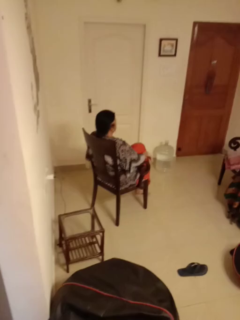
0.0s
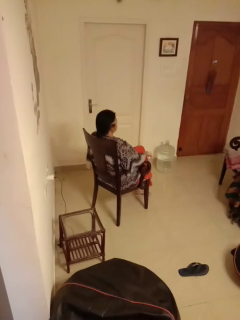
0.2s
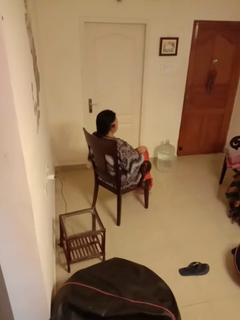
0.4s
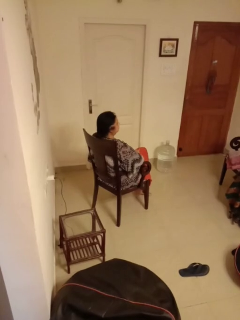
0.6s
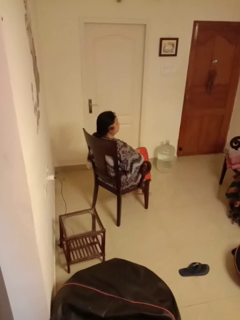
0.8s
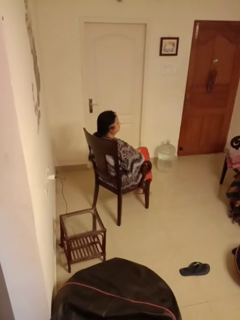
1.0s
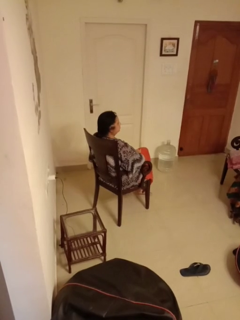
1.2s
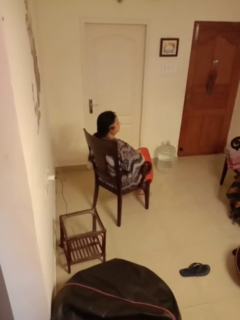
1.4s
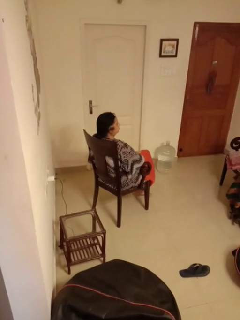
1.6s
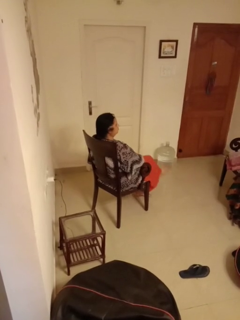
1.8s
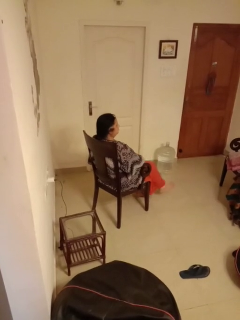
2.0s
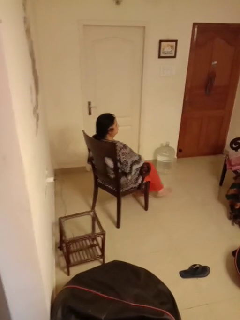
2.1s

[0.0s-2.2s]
person crosses legs

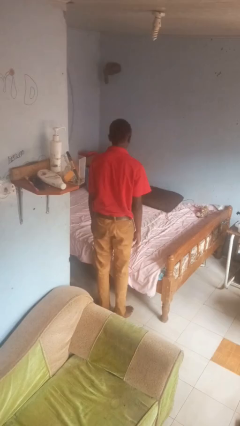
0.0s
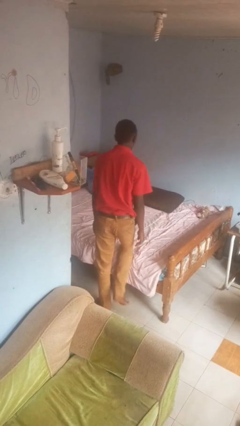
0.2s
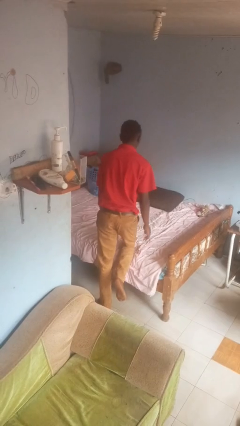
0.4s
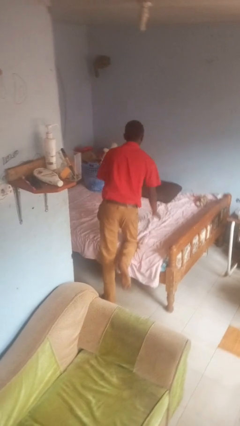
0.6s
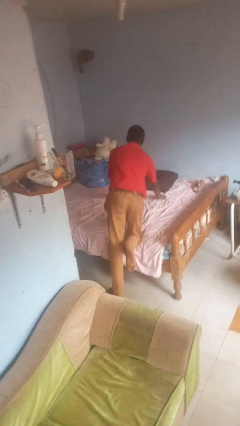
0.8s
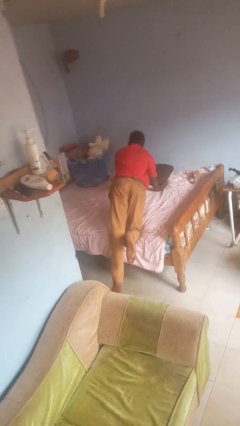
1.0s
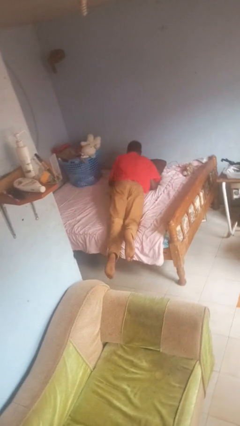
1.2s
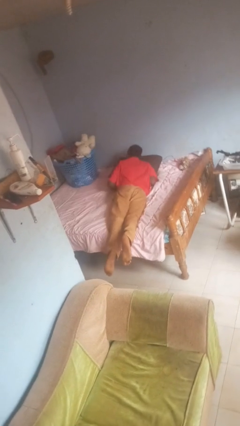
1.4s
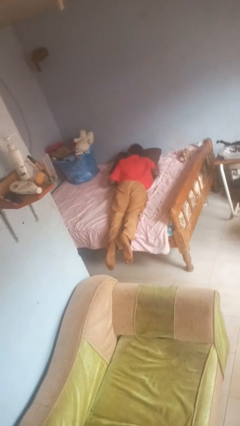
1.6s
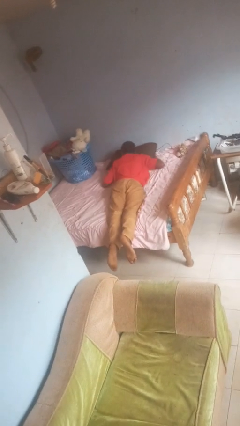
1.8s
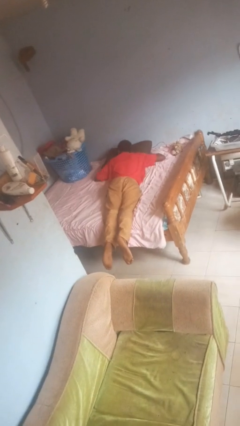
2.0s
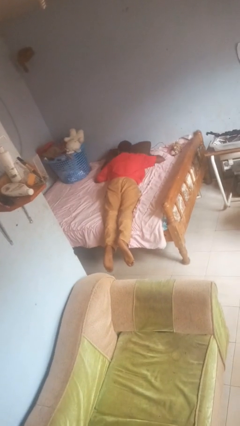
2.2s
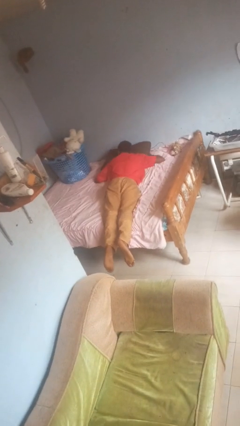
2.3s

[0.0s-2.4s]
person lies down on bed

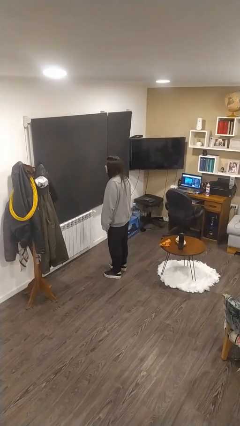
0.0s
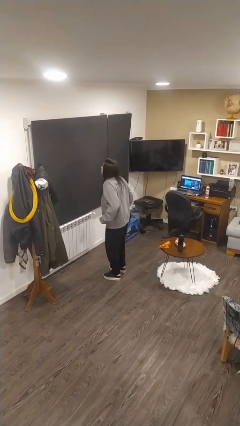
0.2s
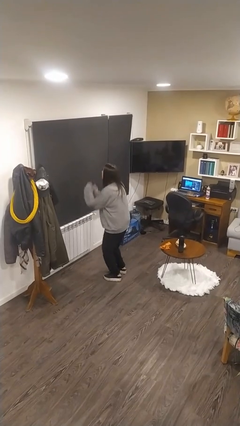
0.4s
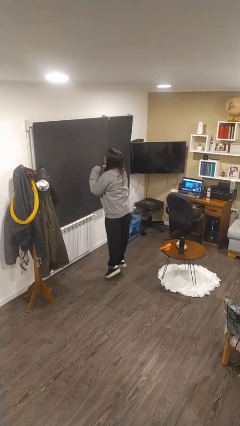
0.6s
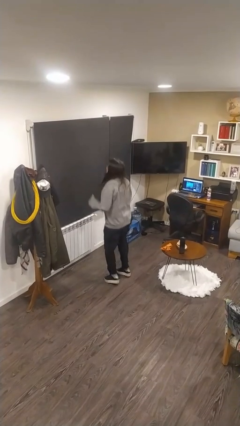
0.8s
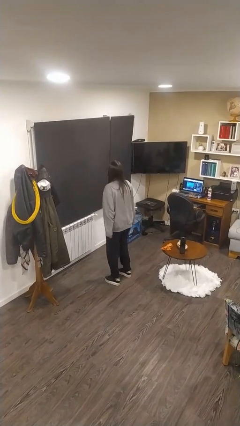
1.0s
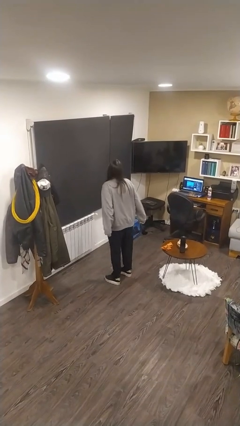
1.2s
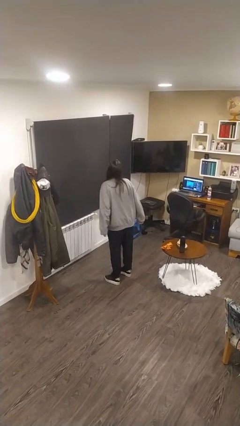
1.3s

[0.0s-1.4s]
person jumps

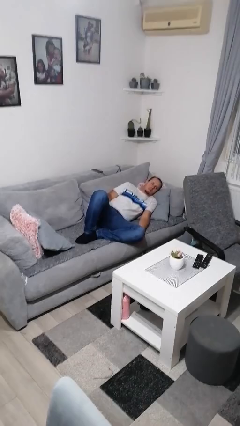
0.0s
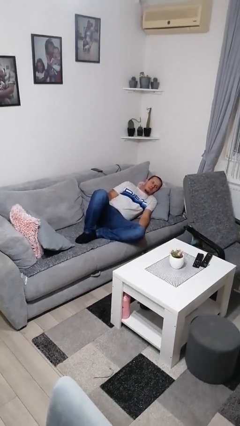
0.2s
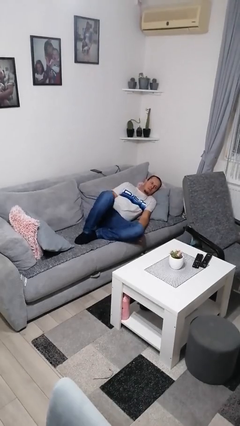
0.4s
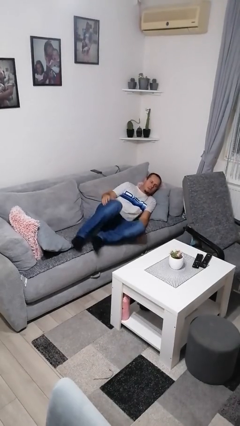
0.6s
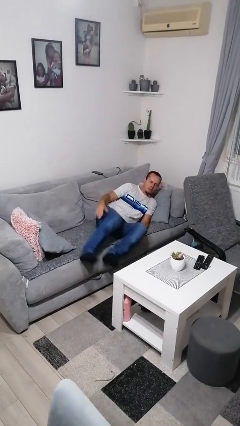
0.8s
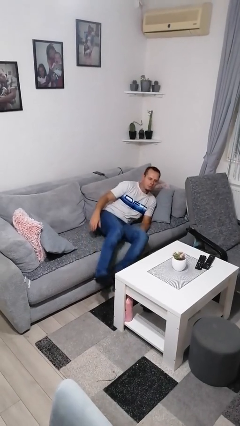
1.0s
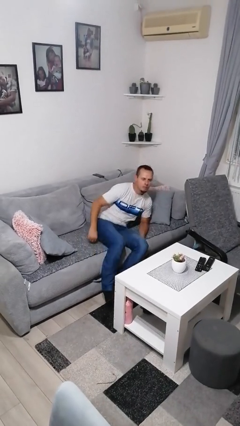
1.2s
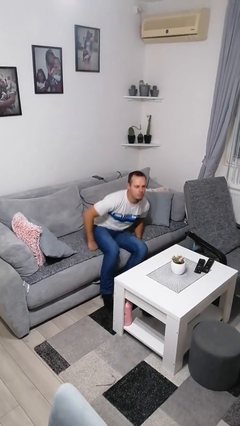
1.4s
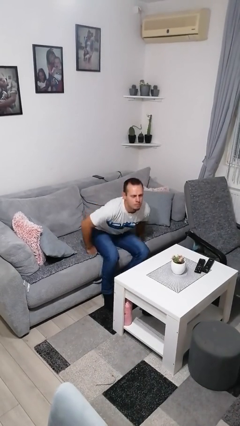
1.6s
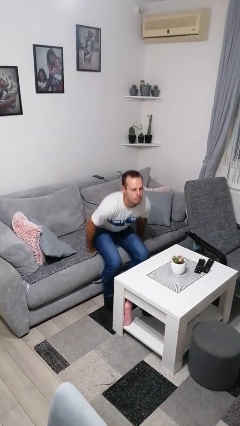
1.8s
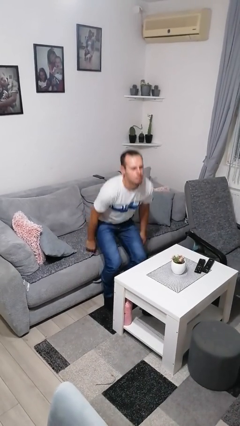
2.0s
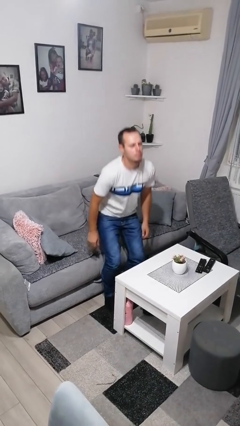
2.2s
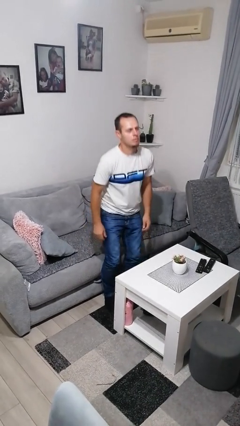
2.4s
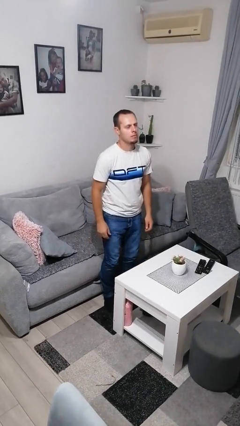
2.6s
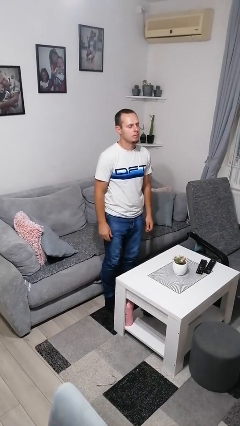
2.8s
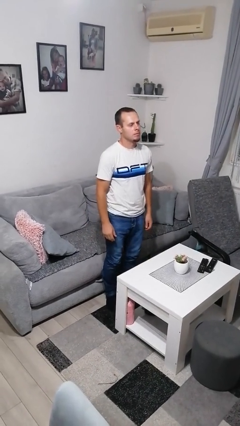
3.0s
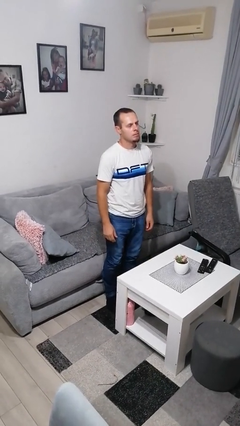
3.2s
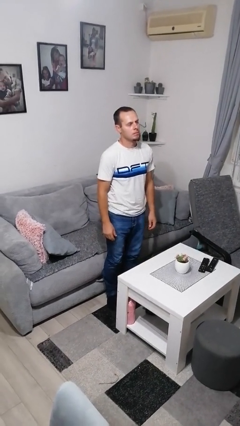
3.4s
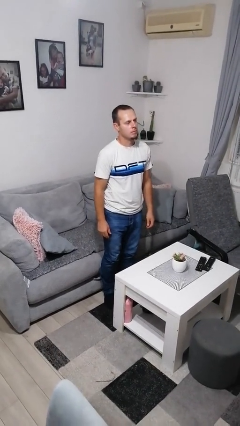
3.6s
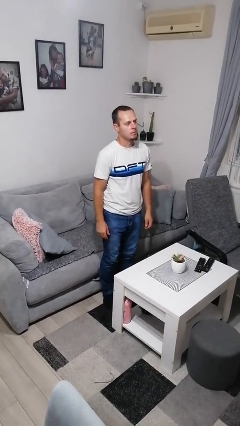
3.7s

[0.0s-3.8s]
person stands up

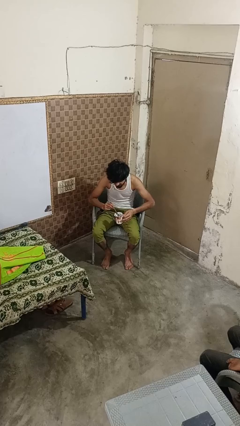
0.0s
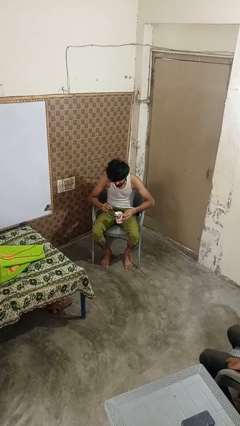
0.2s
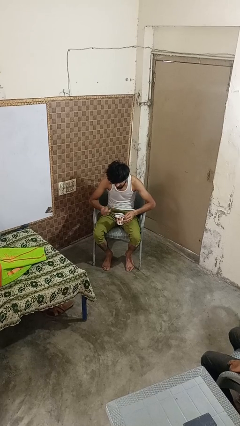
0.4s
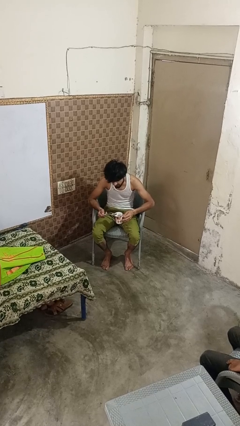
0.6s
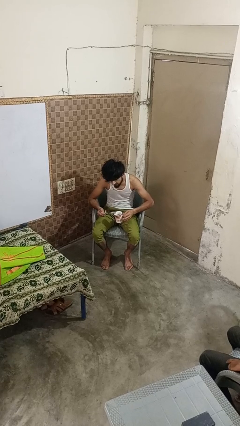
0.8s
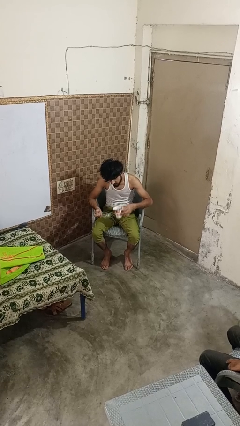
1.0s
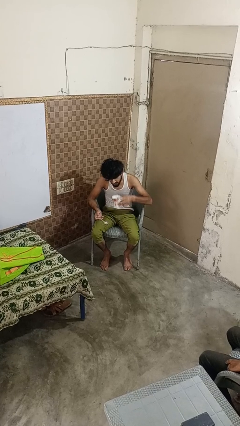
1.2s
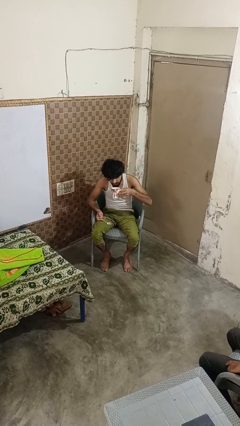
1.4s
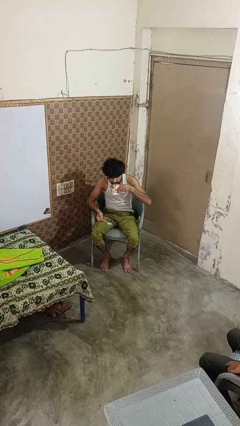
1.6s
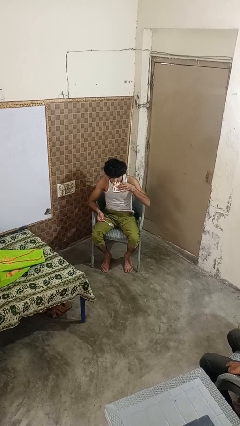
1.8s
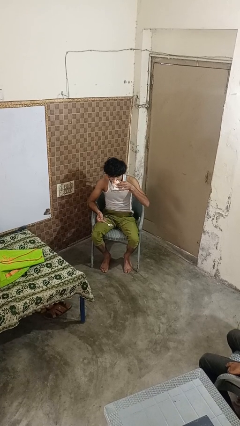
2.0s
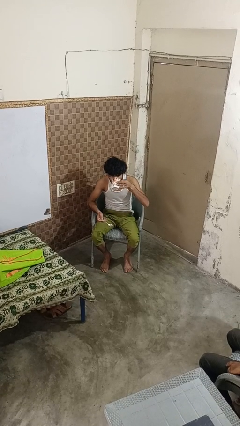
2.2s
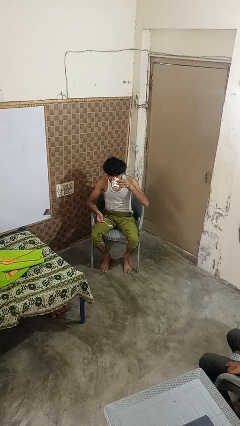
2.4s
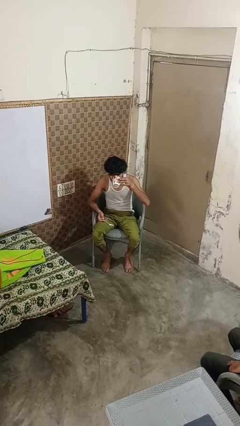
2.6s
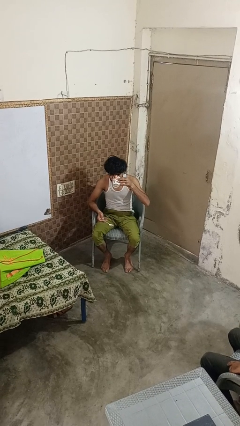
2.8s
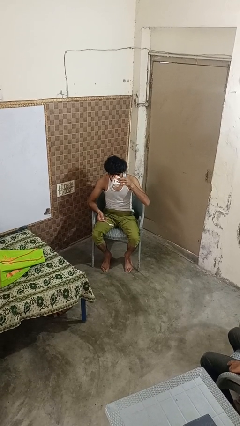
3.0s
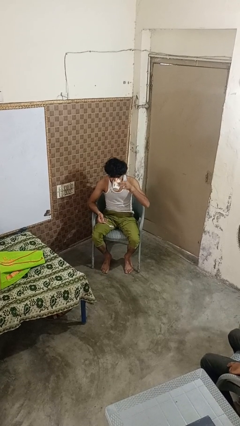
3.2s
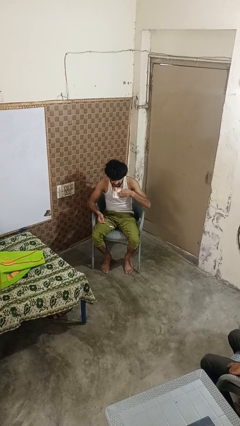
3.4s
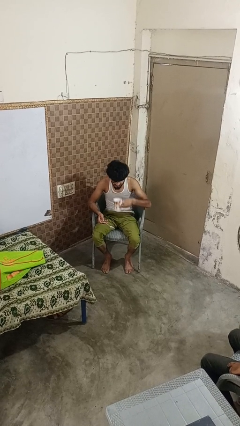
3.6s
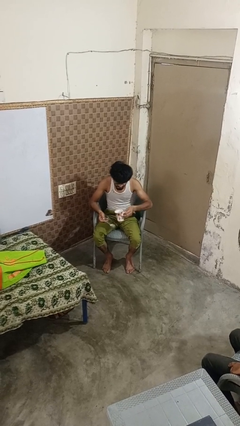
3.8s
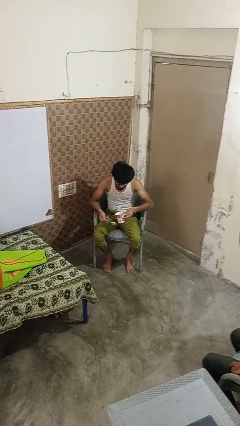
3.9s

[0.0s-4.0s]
person drinks from mug

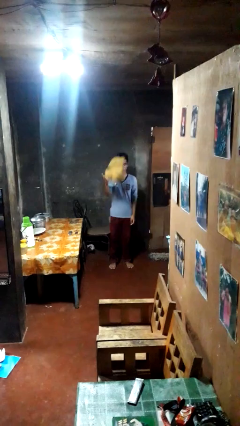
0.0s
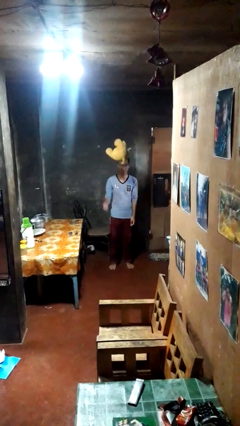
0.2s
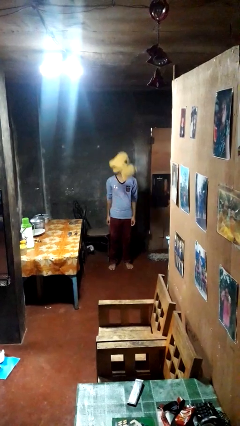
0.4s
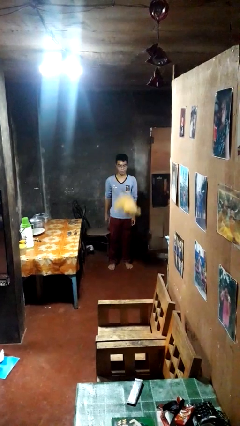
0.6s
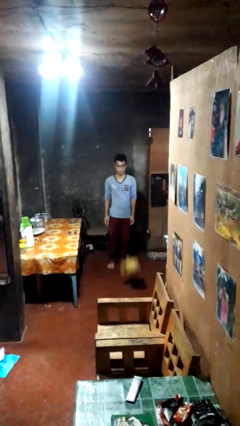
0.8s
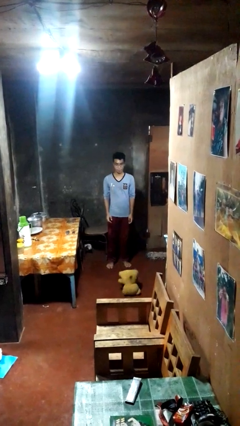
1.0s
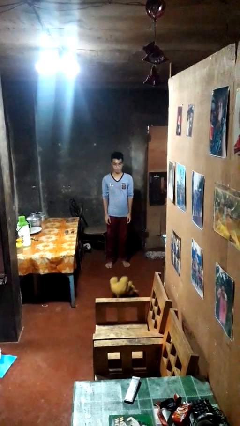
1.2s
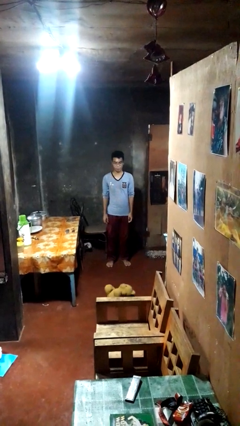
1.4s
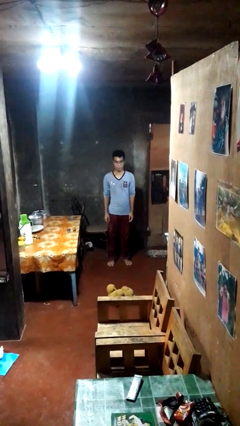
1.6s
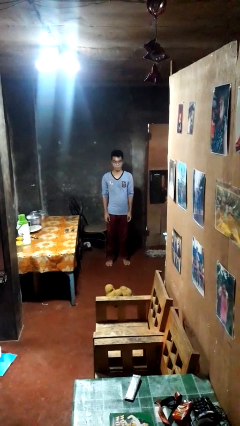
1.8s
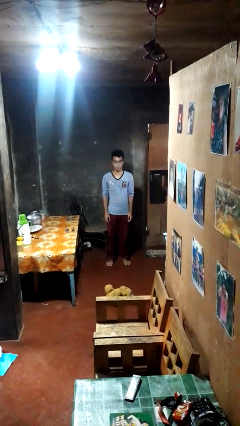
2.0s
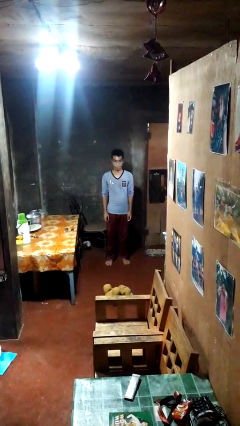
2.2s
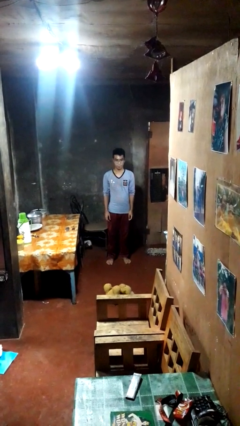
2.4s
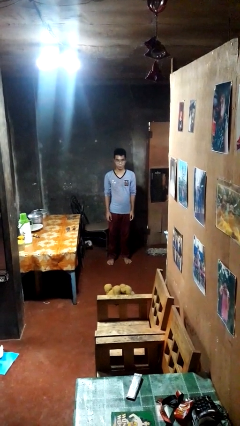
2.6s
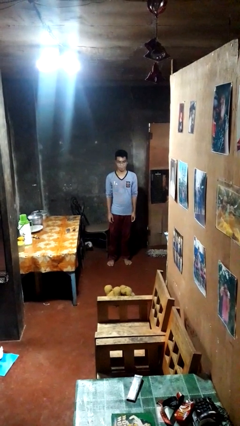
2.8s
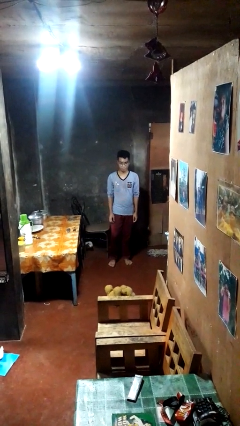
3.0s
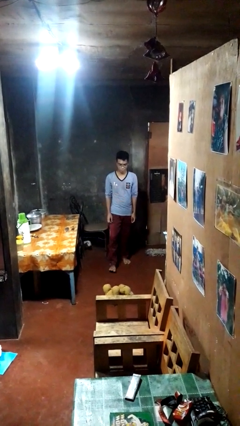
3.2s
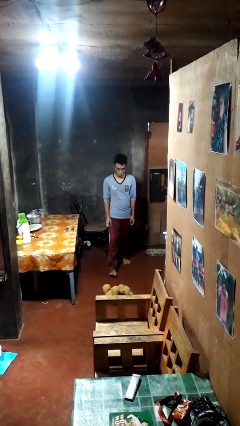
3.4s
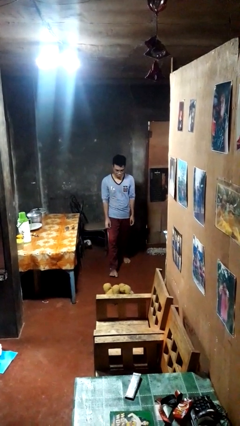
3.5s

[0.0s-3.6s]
person throws object into air

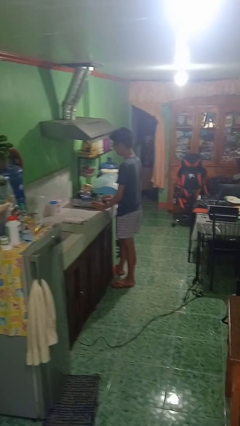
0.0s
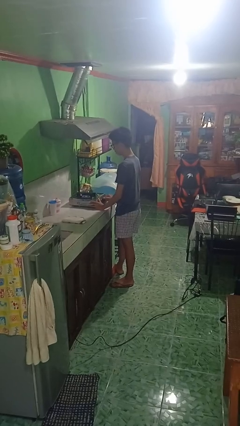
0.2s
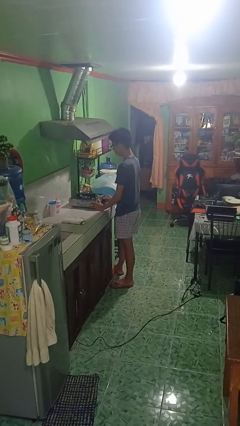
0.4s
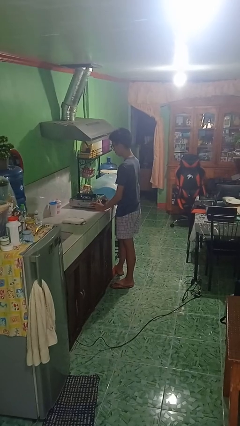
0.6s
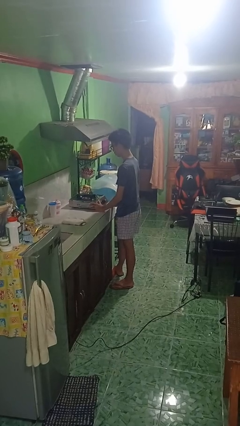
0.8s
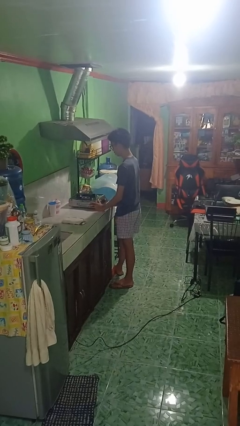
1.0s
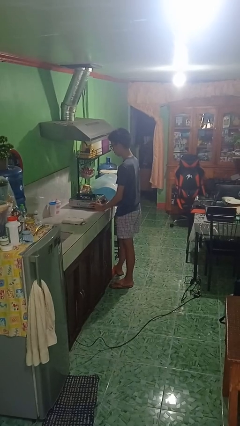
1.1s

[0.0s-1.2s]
person turns off stovetop
